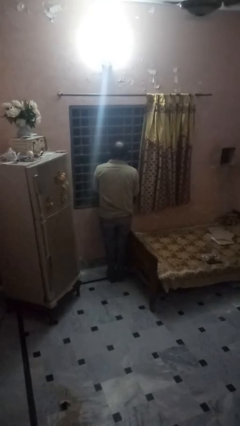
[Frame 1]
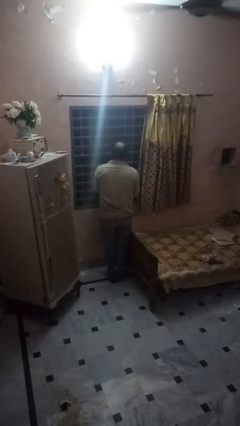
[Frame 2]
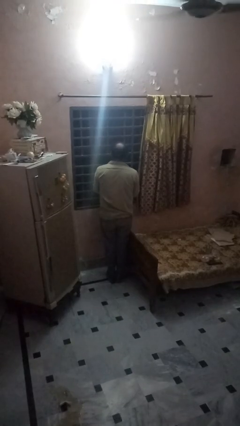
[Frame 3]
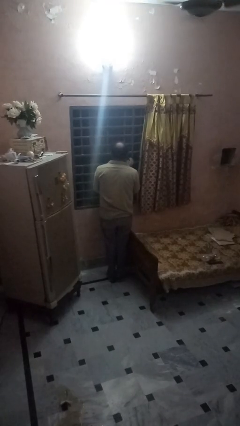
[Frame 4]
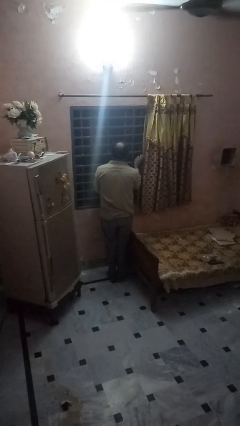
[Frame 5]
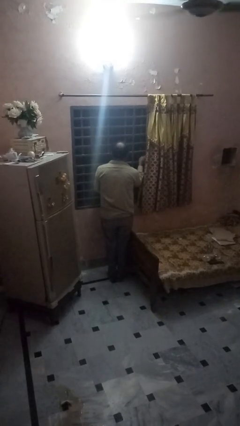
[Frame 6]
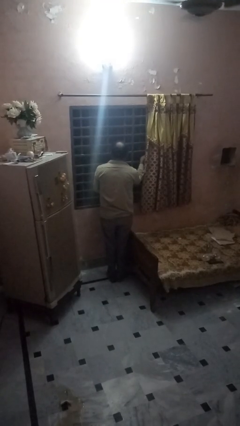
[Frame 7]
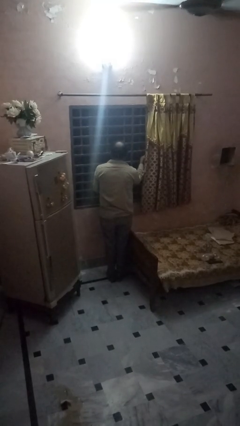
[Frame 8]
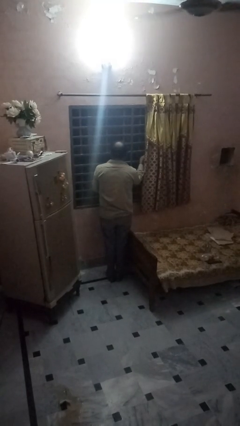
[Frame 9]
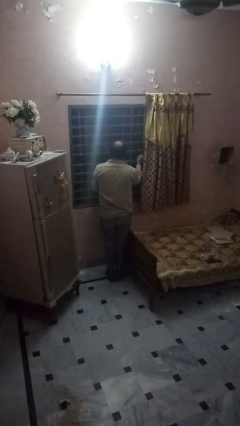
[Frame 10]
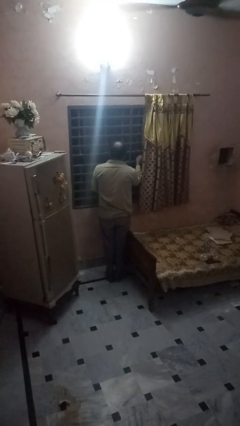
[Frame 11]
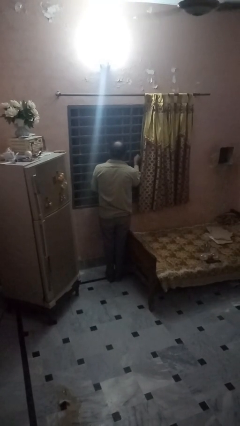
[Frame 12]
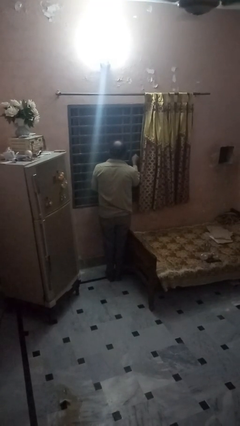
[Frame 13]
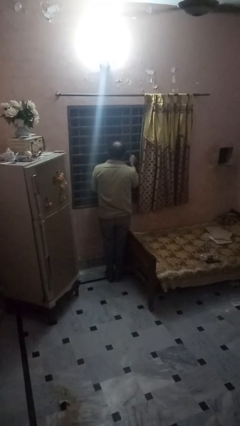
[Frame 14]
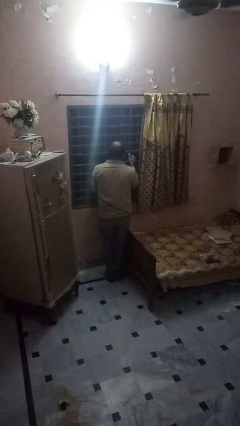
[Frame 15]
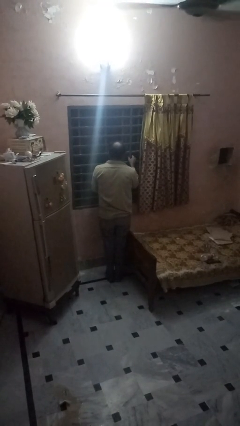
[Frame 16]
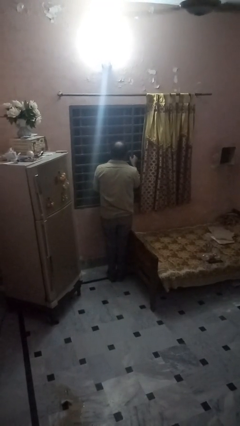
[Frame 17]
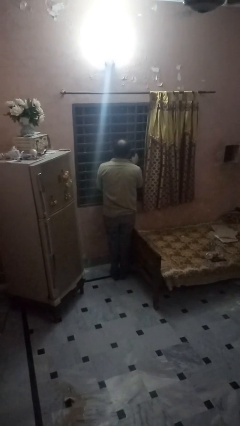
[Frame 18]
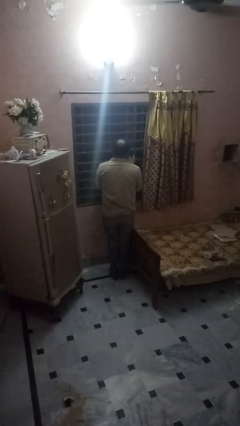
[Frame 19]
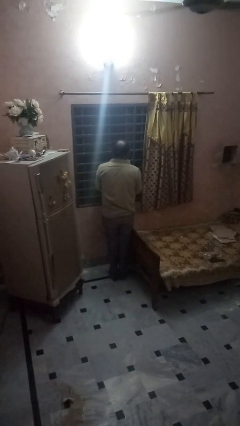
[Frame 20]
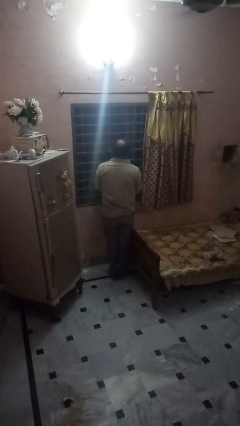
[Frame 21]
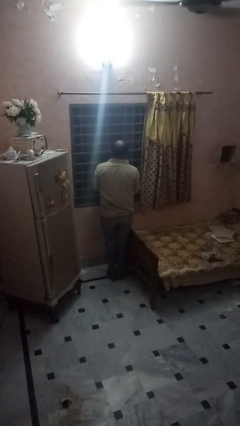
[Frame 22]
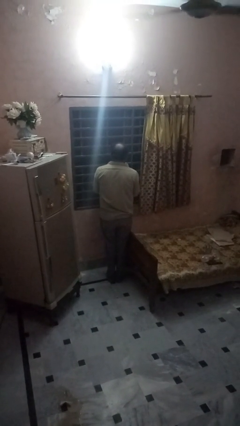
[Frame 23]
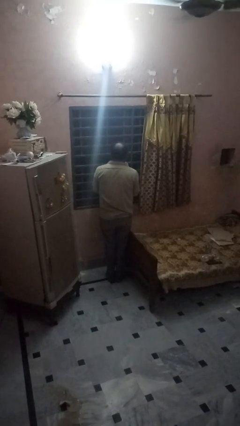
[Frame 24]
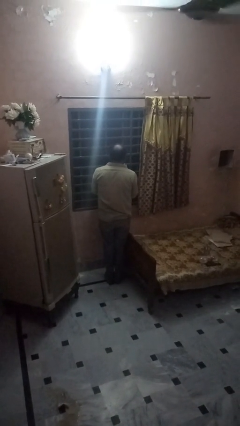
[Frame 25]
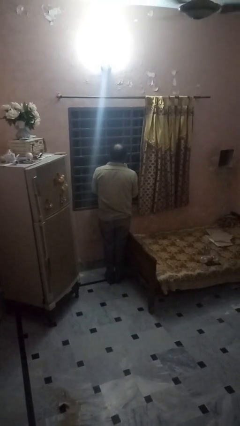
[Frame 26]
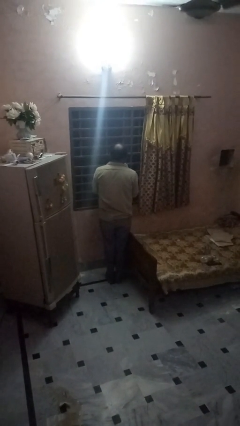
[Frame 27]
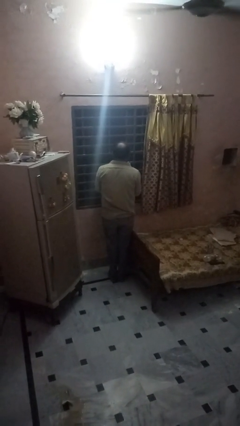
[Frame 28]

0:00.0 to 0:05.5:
person closes home window

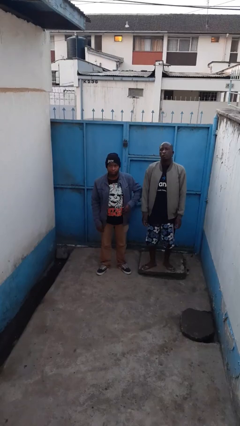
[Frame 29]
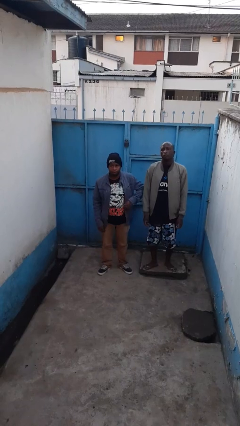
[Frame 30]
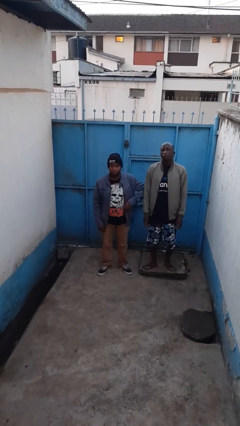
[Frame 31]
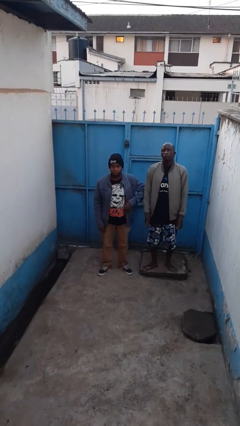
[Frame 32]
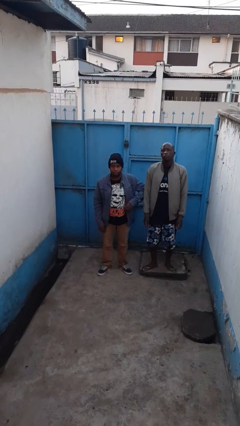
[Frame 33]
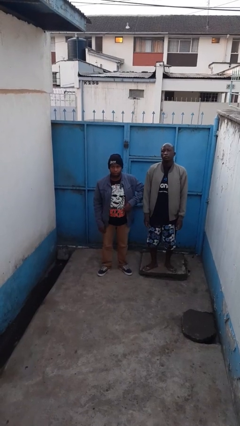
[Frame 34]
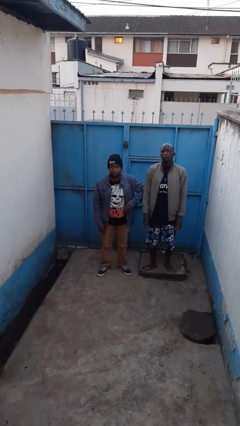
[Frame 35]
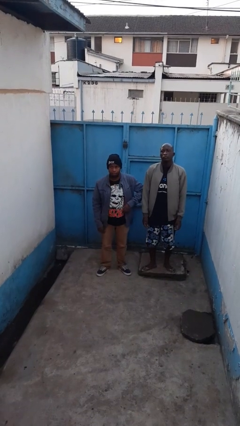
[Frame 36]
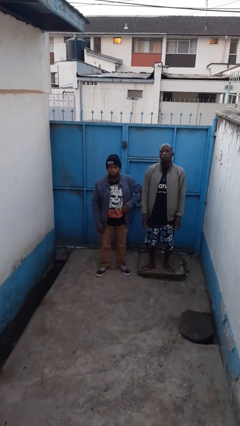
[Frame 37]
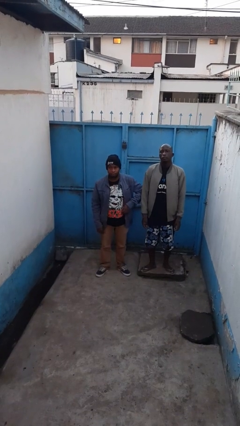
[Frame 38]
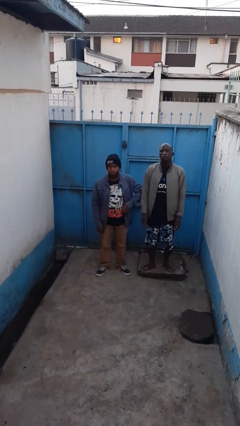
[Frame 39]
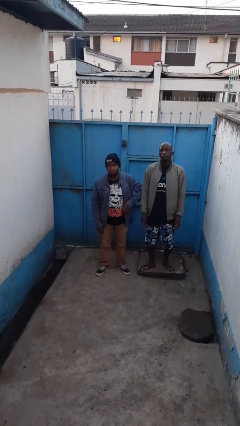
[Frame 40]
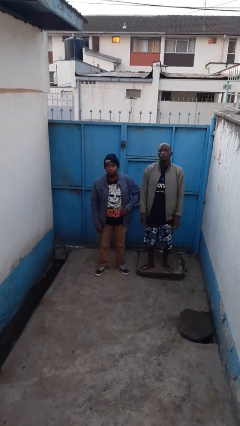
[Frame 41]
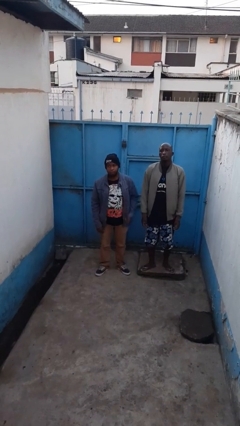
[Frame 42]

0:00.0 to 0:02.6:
person nudges person with elbow

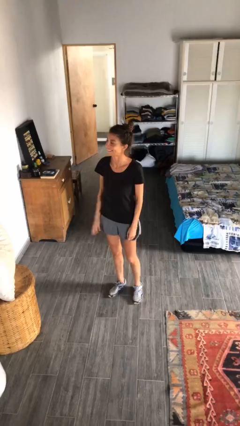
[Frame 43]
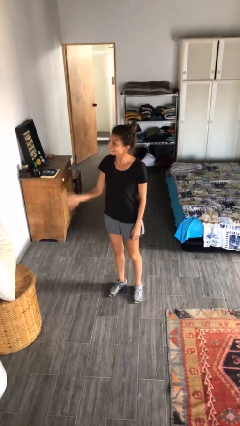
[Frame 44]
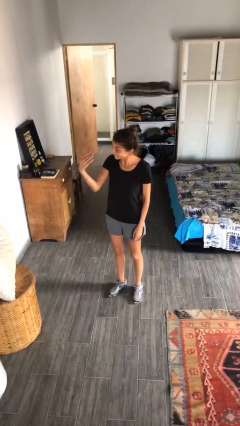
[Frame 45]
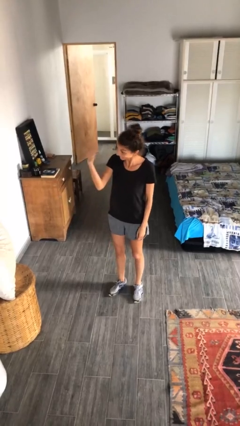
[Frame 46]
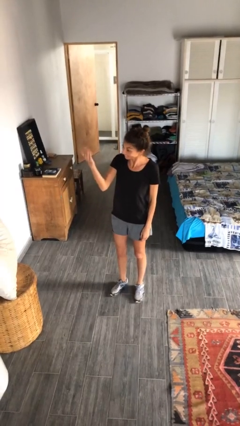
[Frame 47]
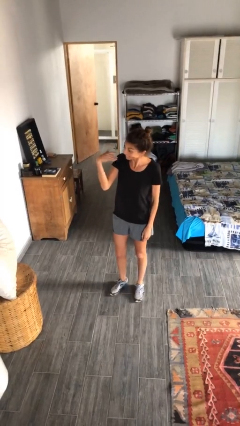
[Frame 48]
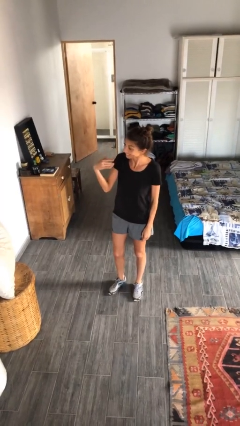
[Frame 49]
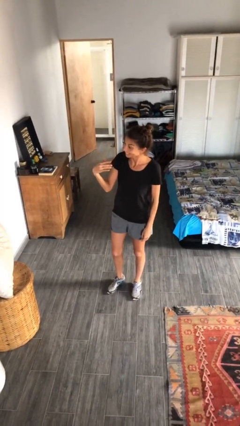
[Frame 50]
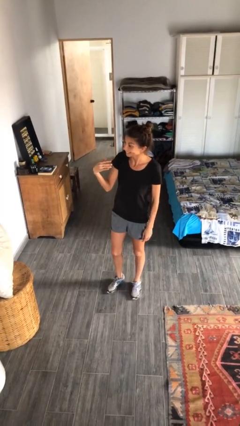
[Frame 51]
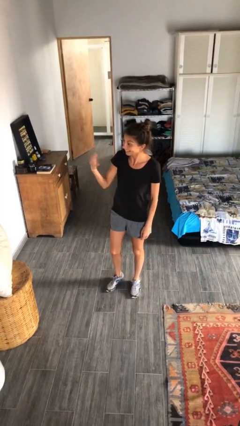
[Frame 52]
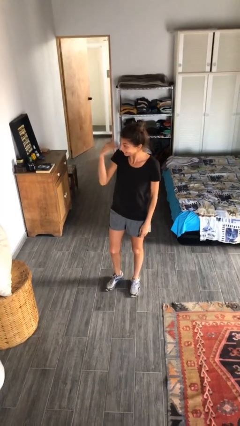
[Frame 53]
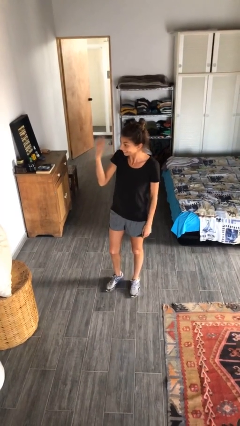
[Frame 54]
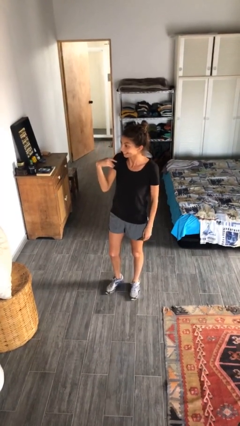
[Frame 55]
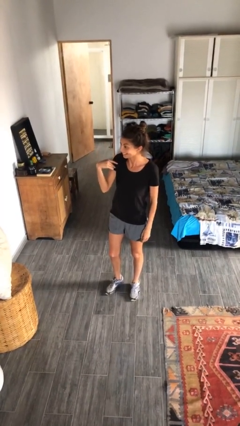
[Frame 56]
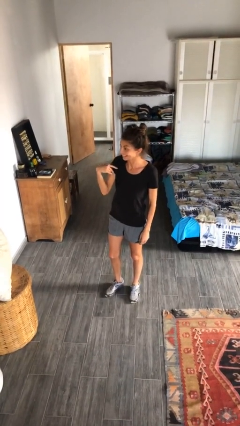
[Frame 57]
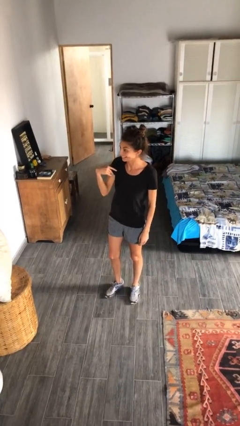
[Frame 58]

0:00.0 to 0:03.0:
person gestures come here

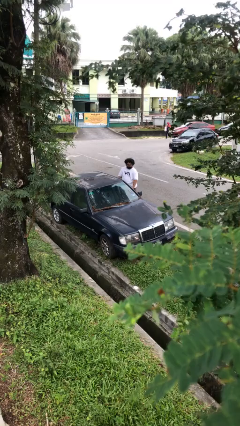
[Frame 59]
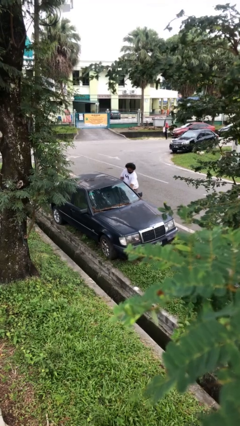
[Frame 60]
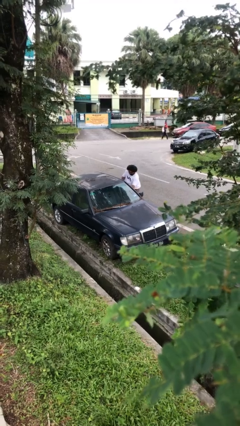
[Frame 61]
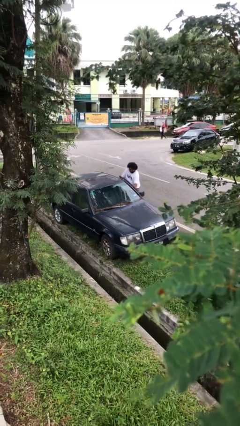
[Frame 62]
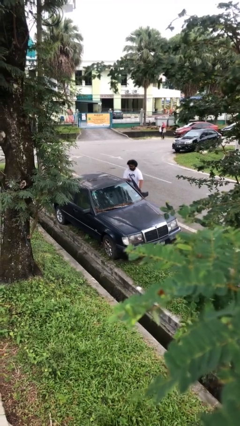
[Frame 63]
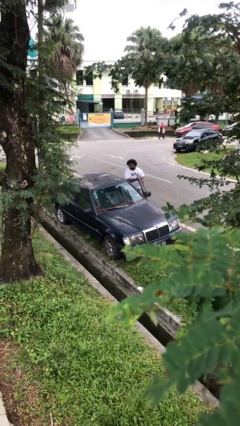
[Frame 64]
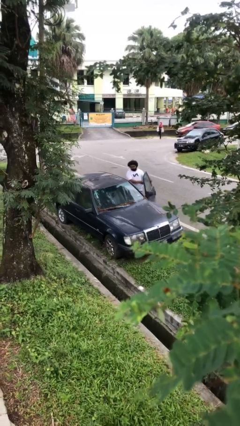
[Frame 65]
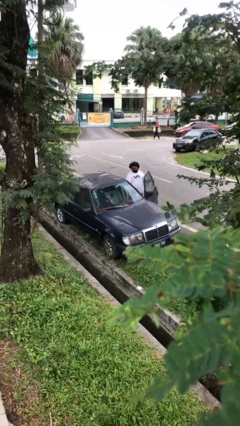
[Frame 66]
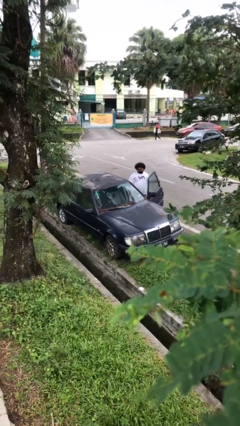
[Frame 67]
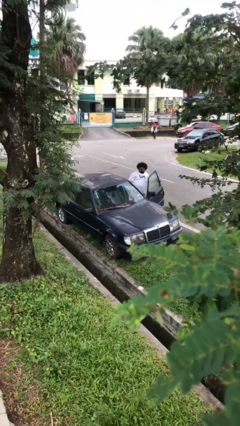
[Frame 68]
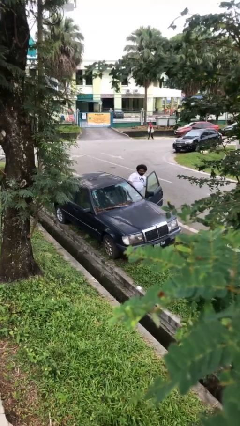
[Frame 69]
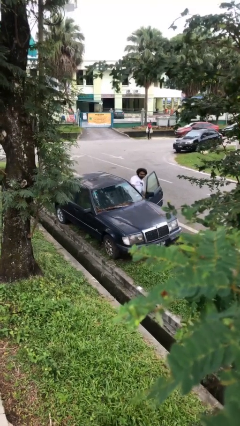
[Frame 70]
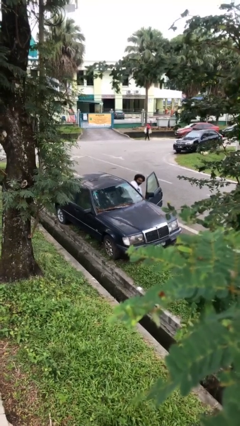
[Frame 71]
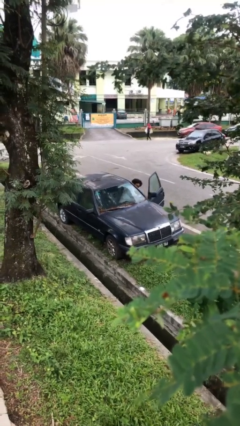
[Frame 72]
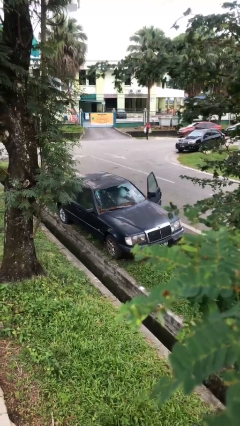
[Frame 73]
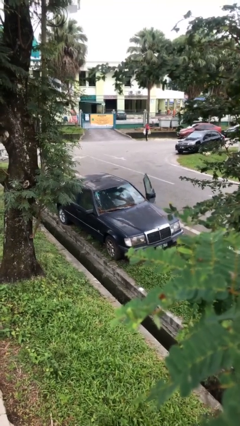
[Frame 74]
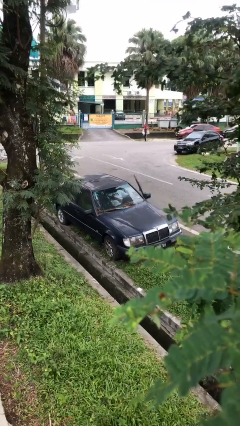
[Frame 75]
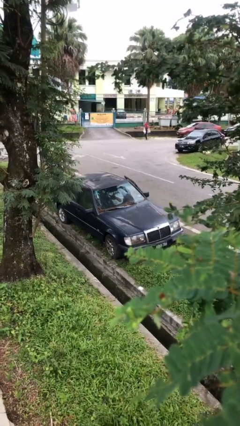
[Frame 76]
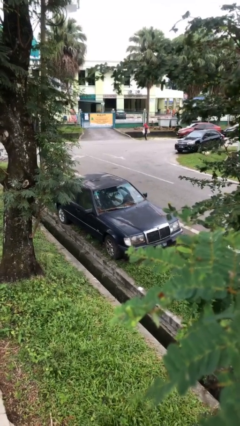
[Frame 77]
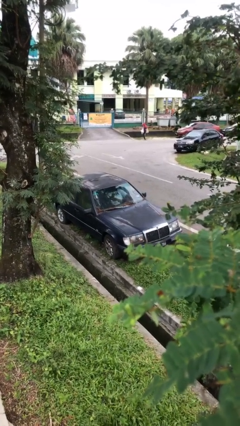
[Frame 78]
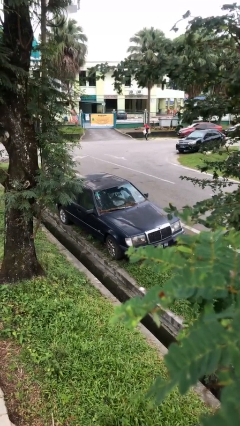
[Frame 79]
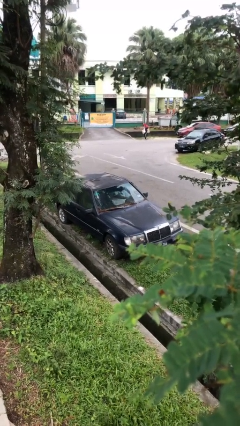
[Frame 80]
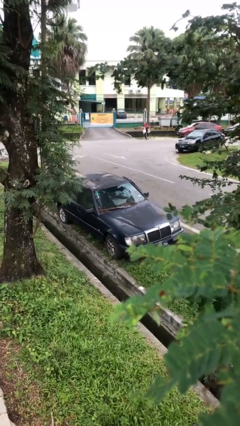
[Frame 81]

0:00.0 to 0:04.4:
car picks up person

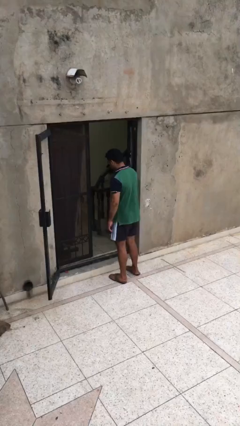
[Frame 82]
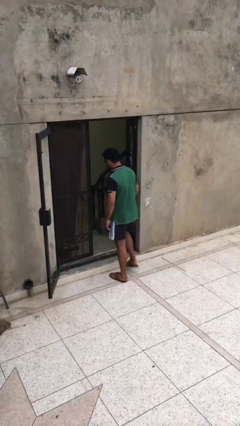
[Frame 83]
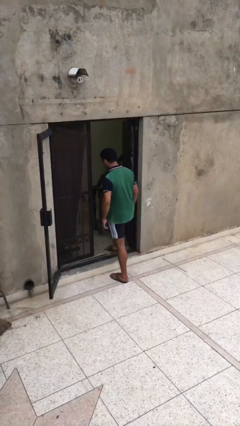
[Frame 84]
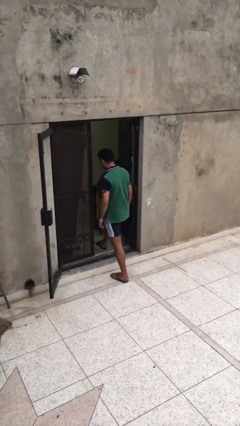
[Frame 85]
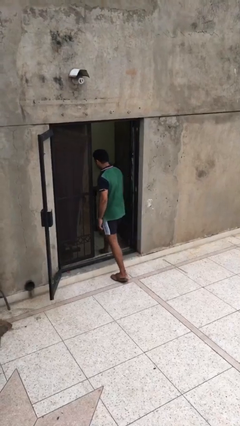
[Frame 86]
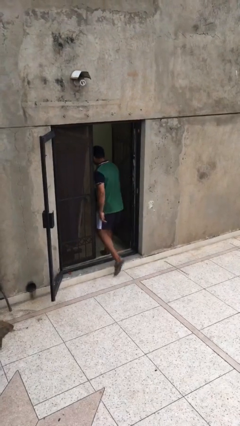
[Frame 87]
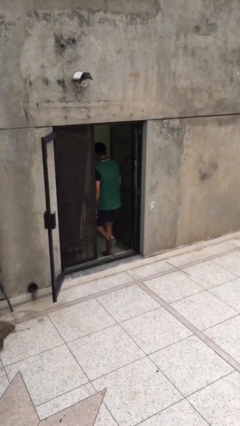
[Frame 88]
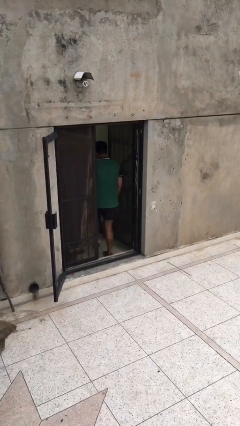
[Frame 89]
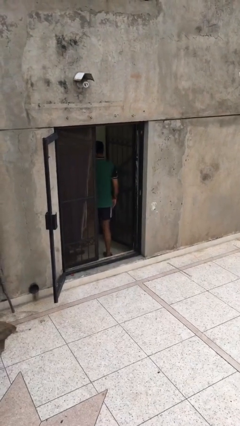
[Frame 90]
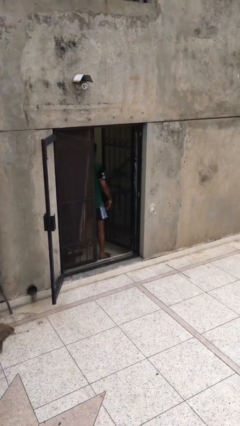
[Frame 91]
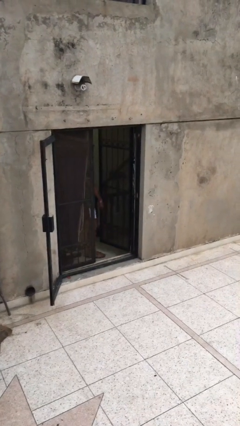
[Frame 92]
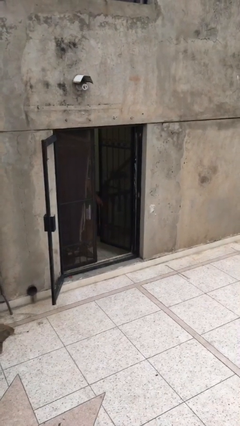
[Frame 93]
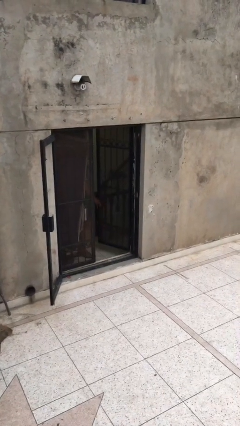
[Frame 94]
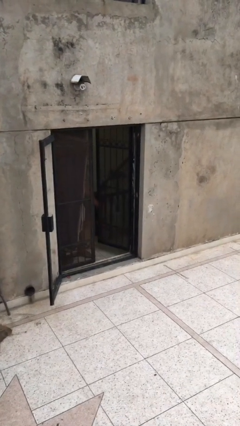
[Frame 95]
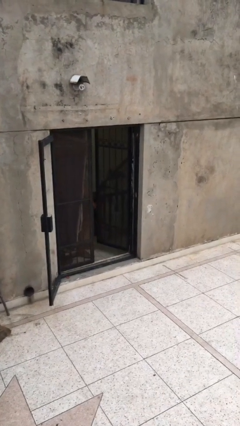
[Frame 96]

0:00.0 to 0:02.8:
person exits scene through structure
